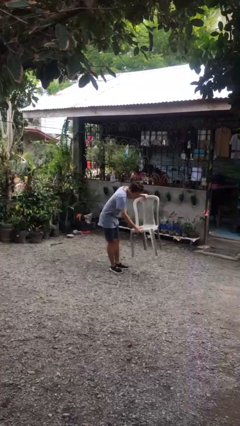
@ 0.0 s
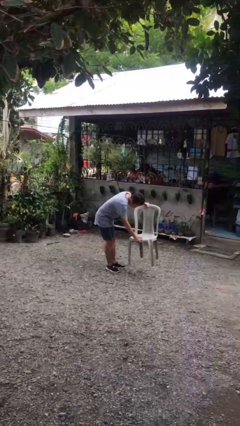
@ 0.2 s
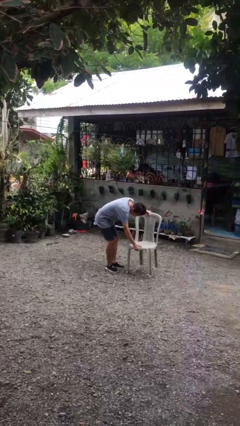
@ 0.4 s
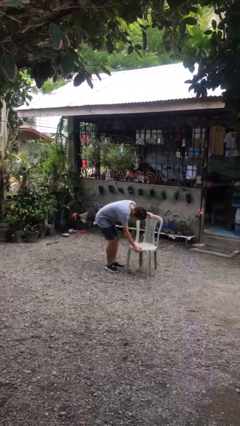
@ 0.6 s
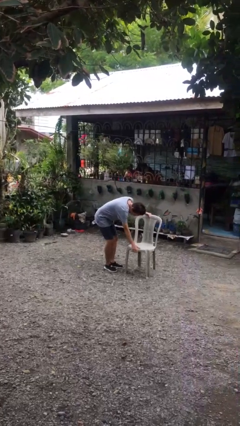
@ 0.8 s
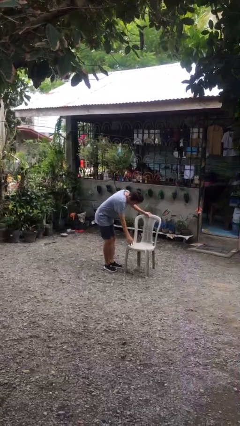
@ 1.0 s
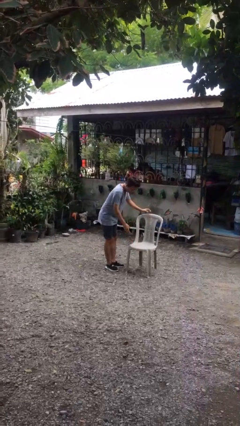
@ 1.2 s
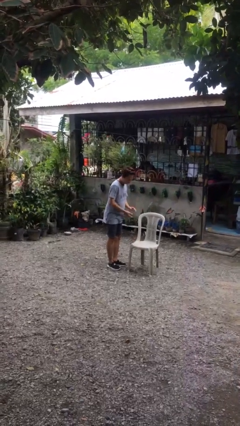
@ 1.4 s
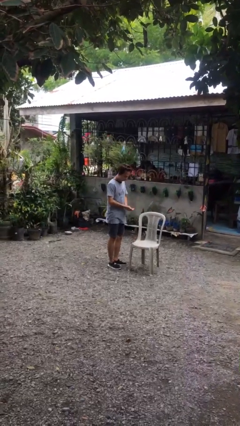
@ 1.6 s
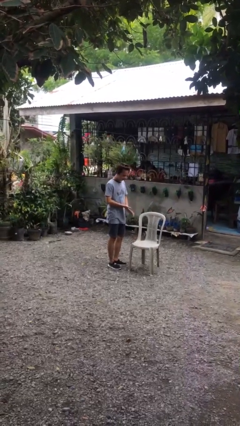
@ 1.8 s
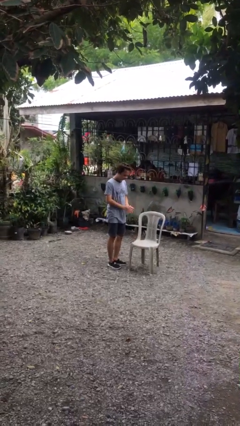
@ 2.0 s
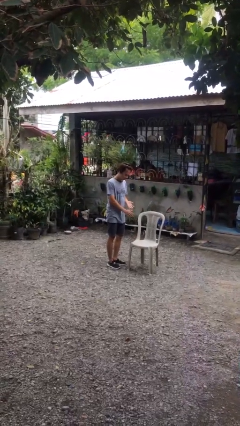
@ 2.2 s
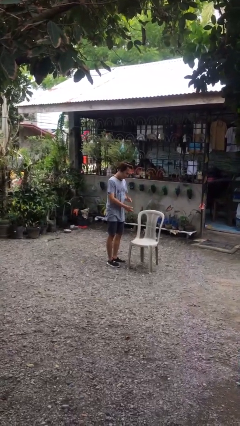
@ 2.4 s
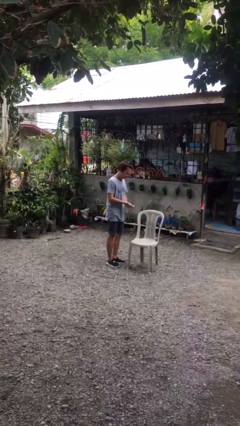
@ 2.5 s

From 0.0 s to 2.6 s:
person puts down object on floor

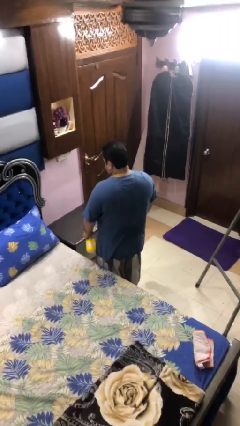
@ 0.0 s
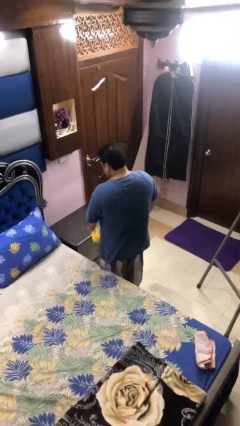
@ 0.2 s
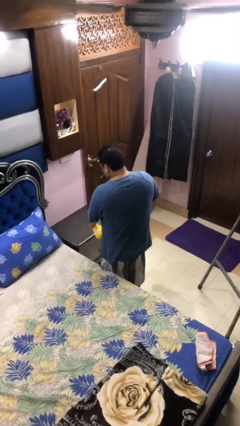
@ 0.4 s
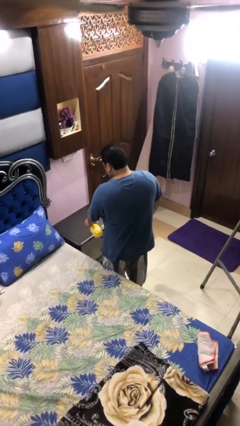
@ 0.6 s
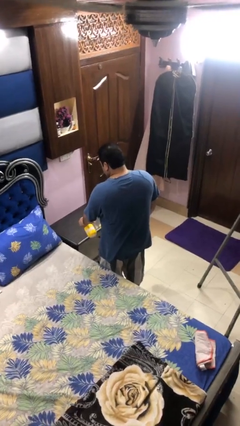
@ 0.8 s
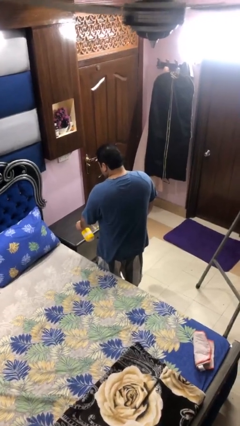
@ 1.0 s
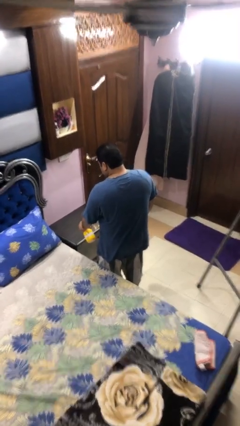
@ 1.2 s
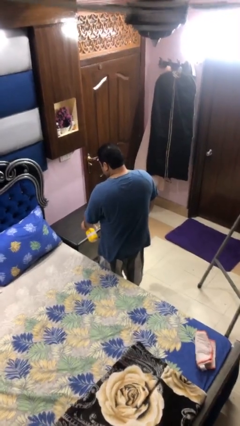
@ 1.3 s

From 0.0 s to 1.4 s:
person sprays from bottle

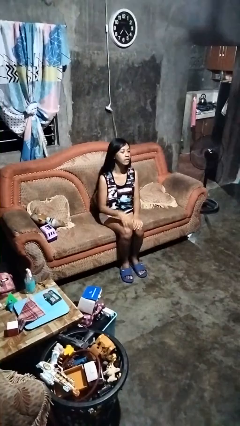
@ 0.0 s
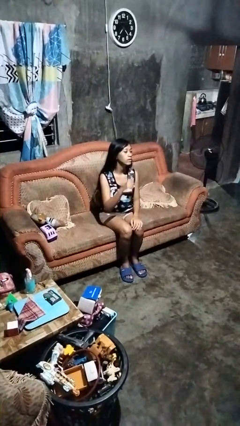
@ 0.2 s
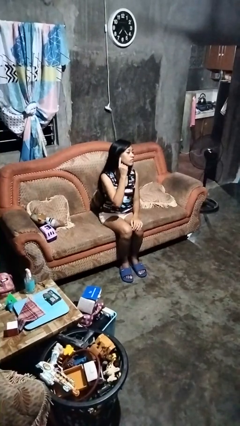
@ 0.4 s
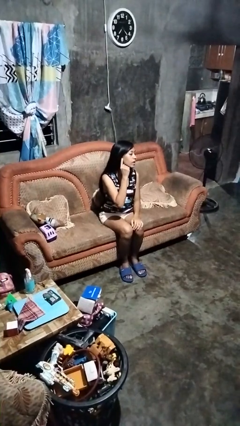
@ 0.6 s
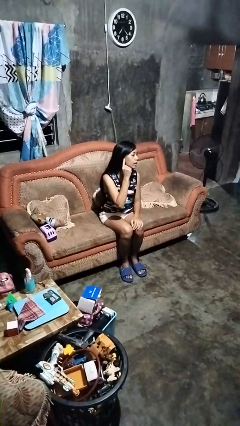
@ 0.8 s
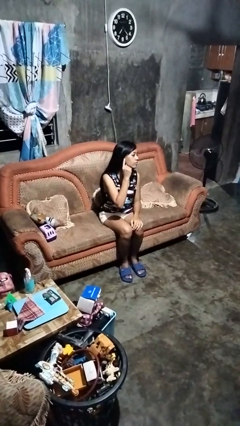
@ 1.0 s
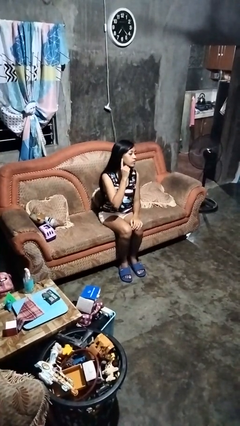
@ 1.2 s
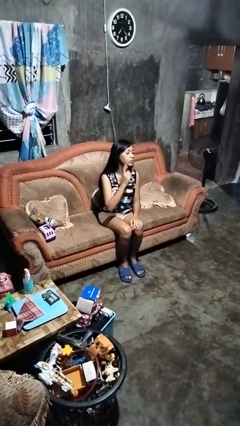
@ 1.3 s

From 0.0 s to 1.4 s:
person gestures listen closely

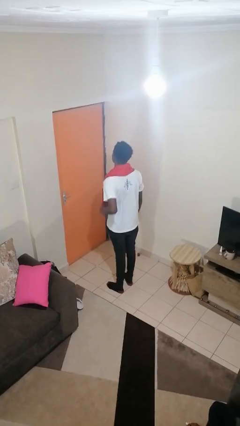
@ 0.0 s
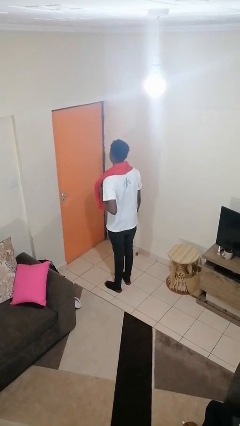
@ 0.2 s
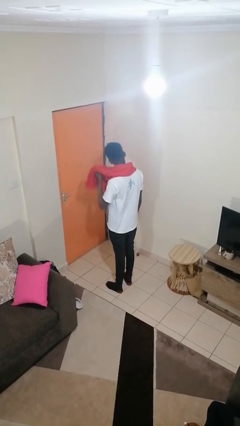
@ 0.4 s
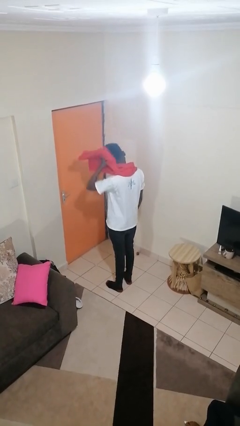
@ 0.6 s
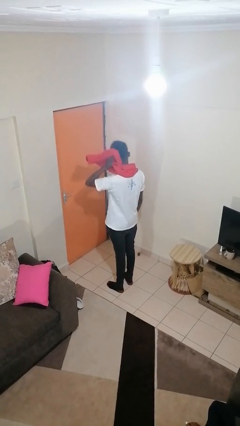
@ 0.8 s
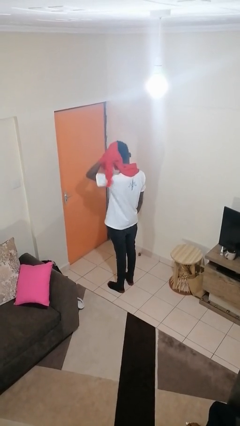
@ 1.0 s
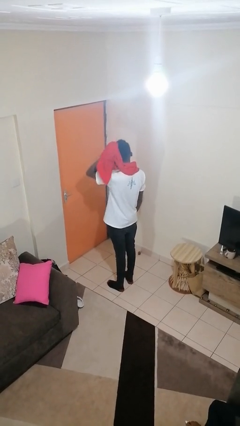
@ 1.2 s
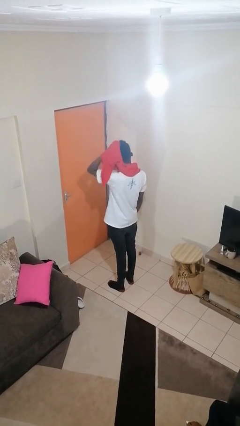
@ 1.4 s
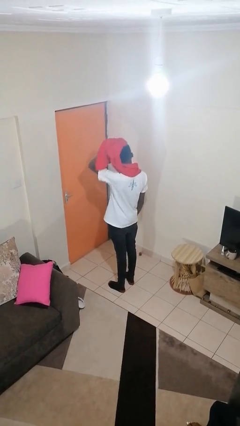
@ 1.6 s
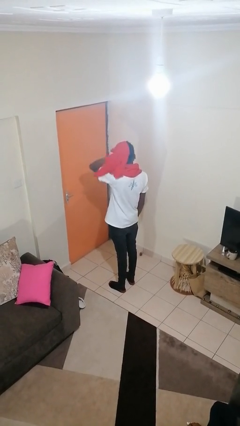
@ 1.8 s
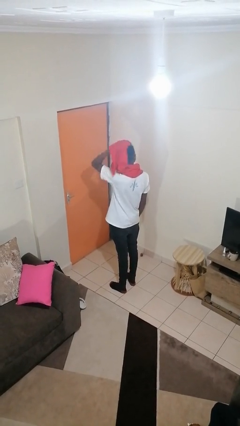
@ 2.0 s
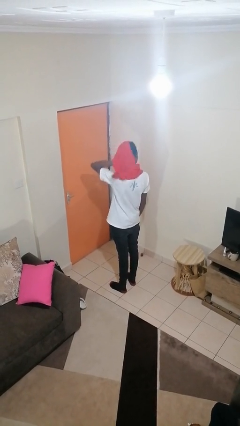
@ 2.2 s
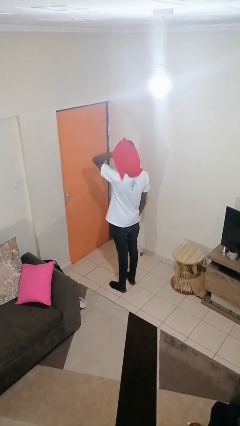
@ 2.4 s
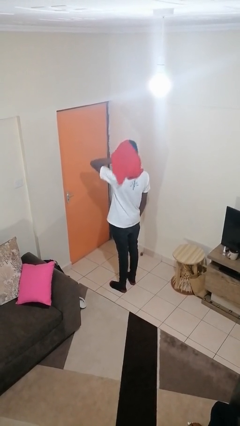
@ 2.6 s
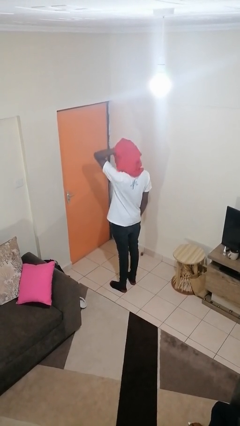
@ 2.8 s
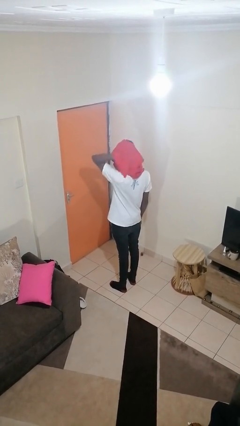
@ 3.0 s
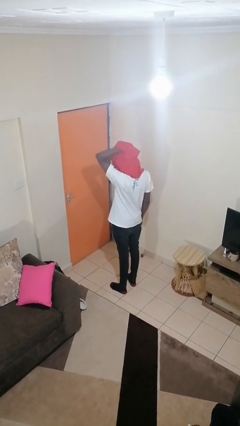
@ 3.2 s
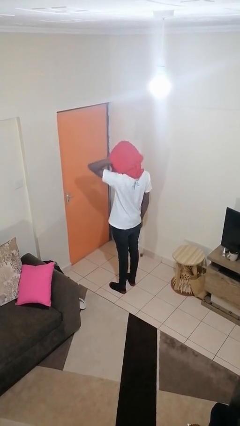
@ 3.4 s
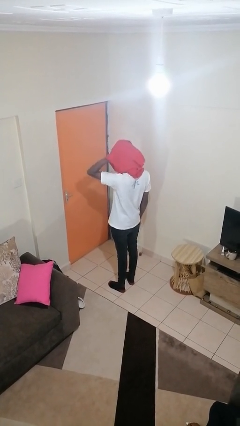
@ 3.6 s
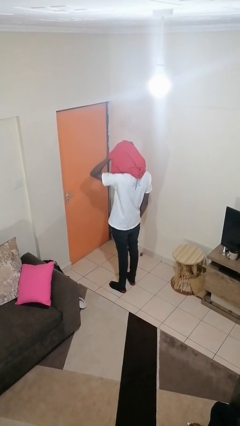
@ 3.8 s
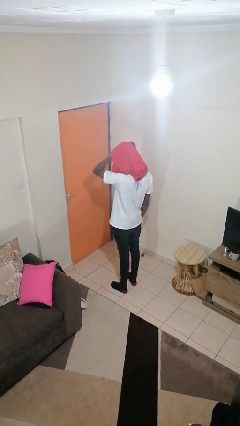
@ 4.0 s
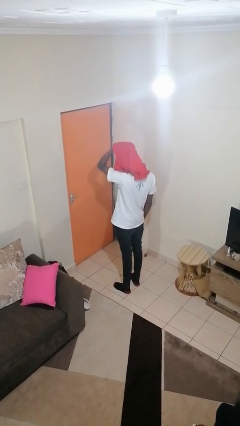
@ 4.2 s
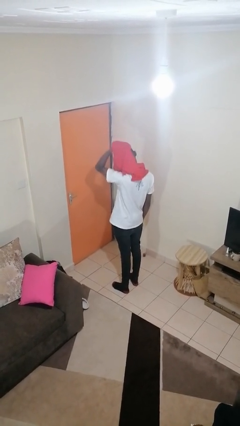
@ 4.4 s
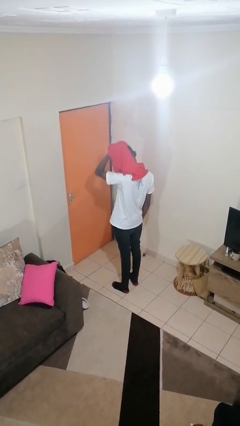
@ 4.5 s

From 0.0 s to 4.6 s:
person dries hair with towel

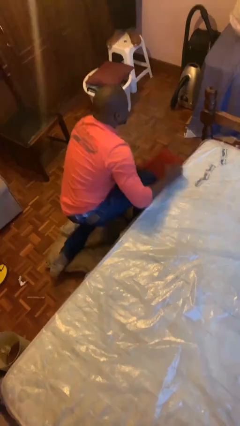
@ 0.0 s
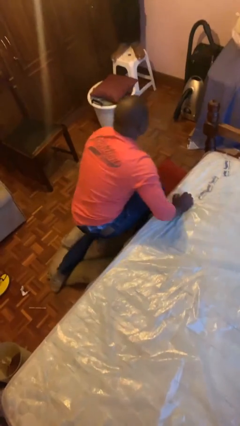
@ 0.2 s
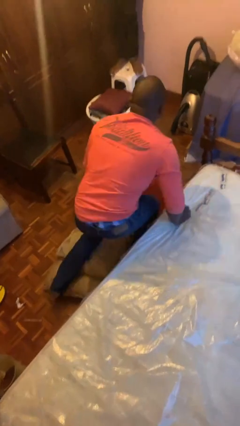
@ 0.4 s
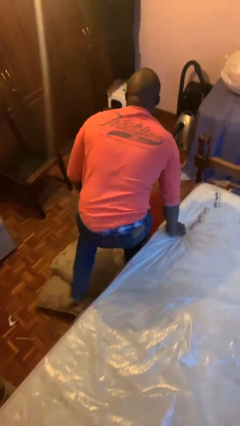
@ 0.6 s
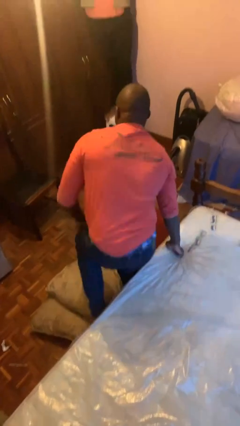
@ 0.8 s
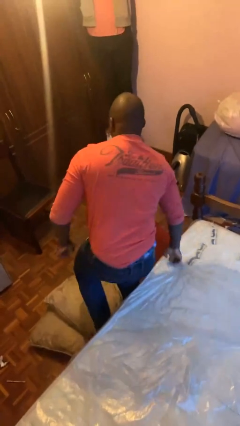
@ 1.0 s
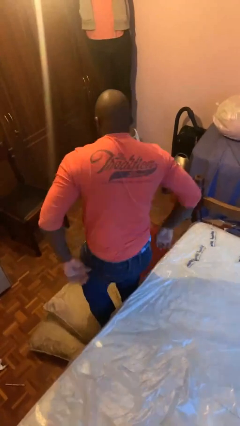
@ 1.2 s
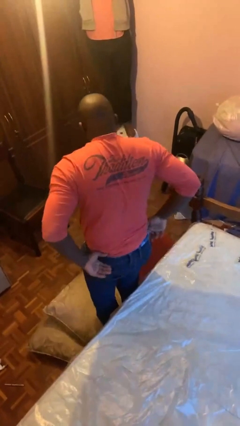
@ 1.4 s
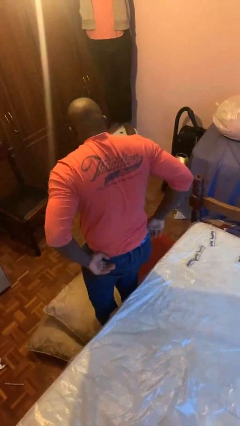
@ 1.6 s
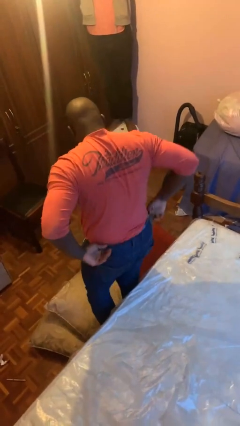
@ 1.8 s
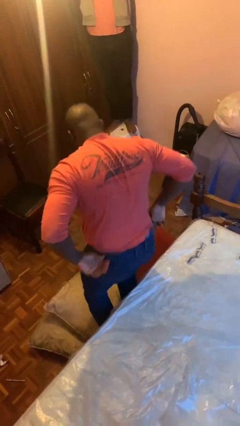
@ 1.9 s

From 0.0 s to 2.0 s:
person stands up from floor

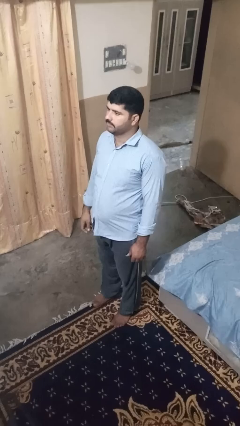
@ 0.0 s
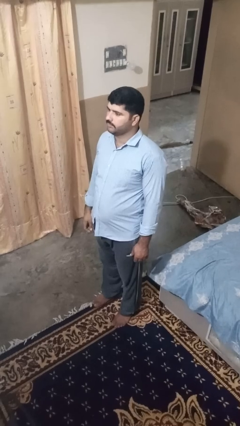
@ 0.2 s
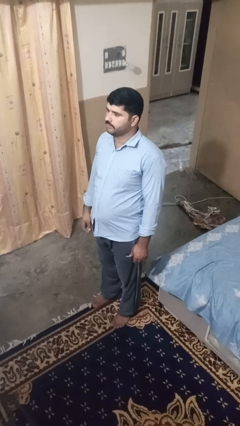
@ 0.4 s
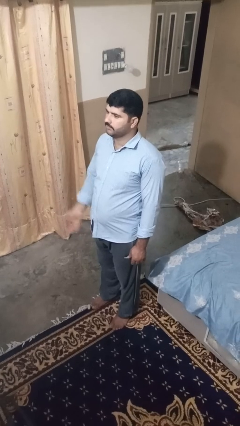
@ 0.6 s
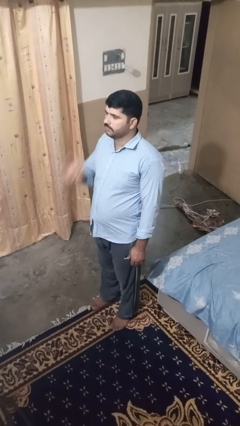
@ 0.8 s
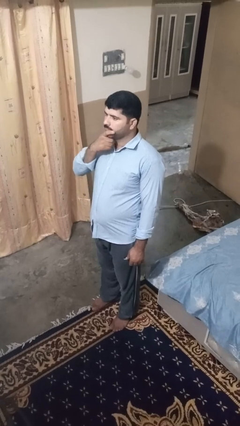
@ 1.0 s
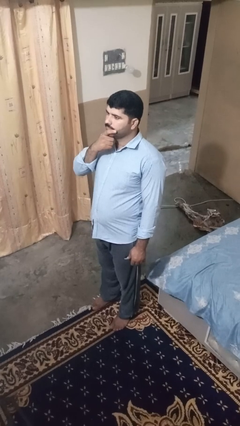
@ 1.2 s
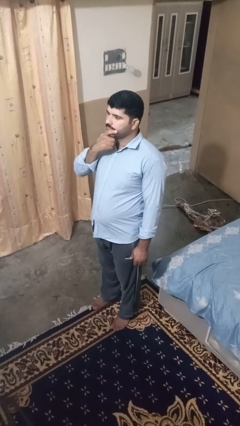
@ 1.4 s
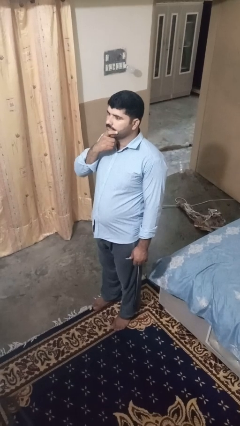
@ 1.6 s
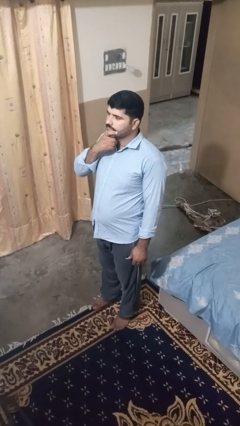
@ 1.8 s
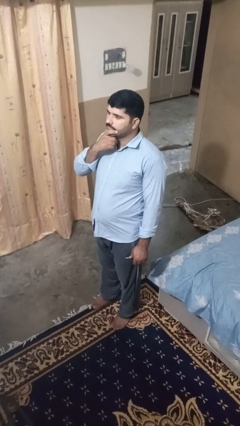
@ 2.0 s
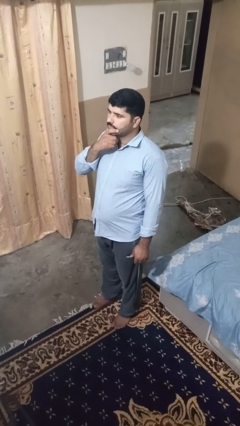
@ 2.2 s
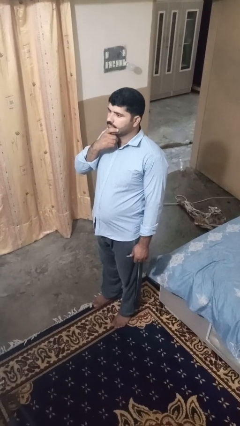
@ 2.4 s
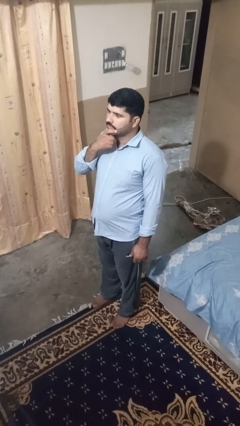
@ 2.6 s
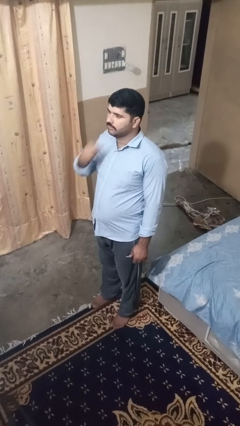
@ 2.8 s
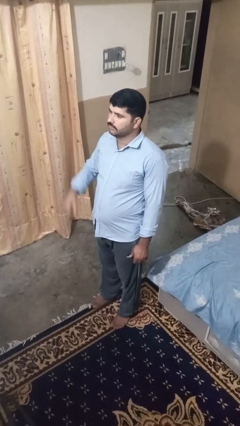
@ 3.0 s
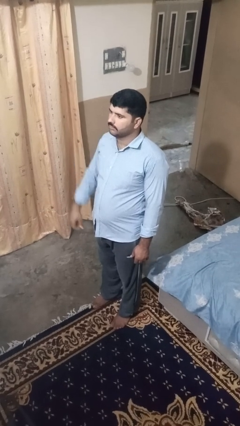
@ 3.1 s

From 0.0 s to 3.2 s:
person strokes chin

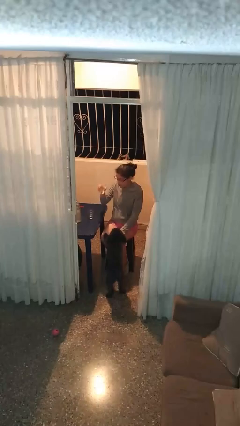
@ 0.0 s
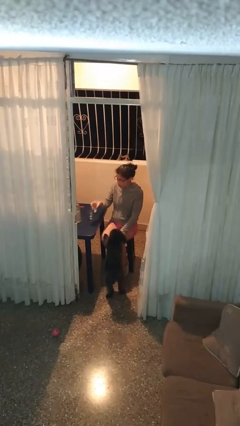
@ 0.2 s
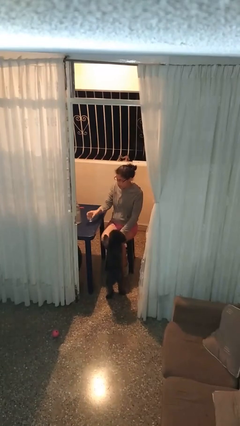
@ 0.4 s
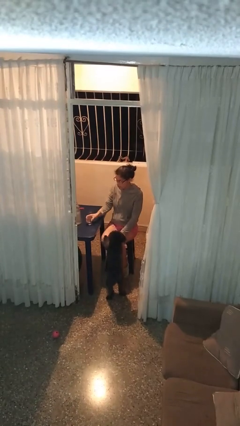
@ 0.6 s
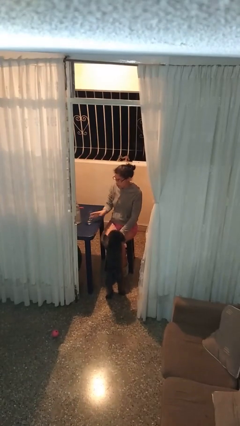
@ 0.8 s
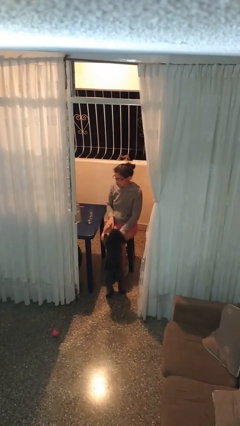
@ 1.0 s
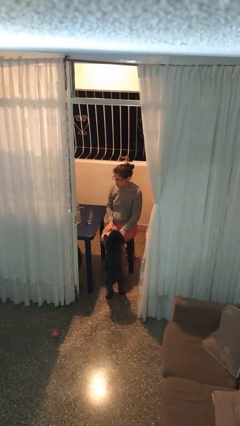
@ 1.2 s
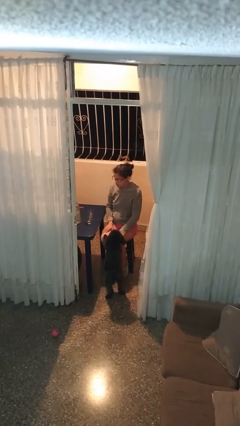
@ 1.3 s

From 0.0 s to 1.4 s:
person puts down object on table

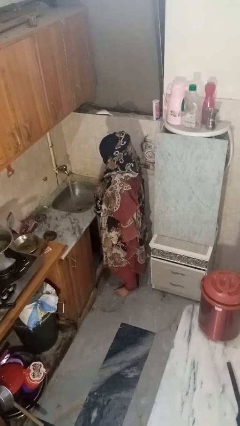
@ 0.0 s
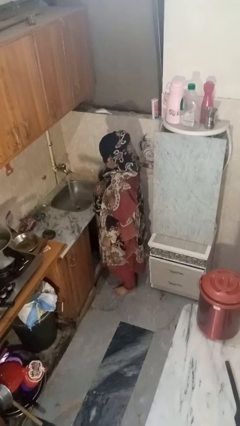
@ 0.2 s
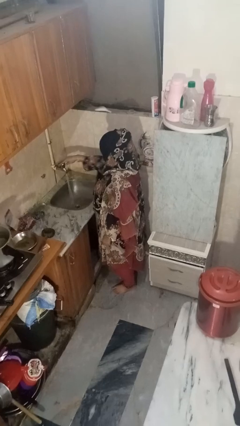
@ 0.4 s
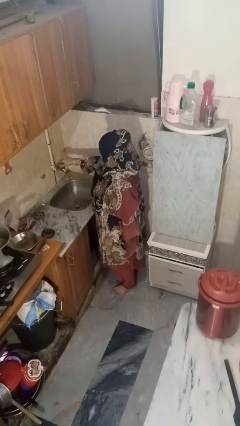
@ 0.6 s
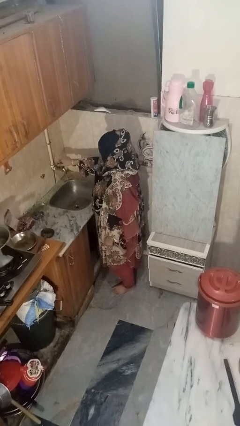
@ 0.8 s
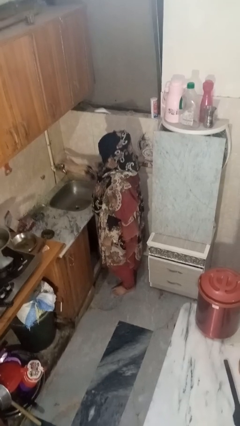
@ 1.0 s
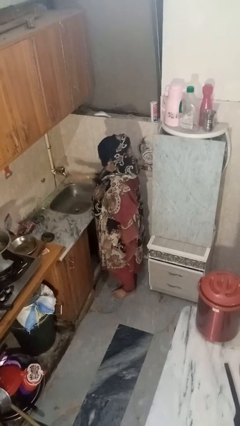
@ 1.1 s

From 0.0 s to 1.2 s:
person turns off faucet
